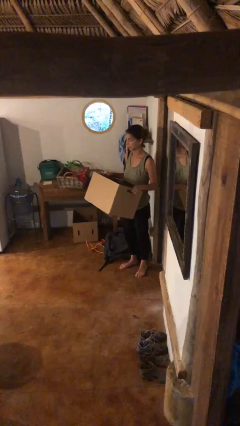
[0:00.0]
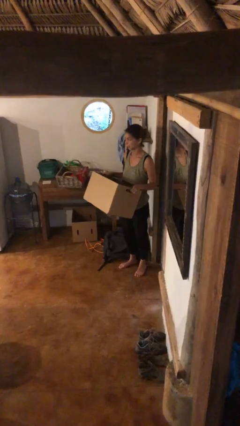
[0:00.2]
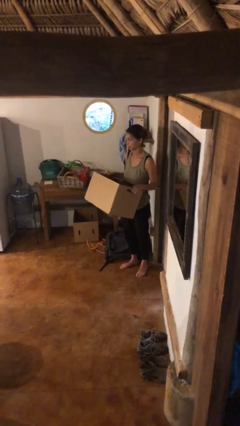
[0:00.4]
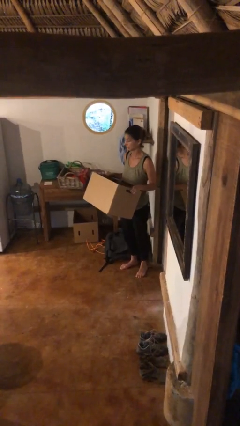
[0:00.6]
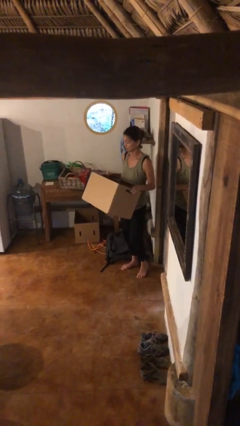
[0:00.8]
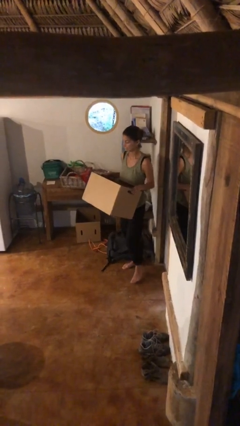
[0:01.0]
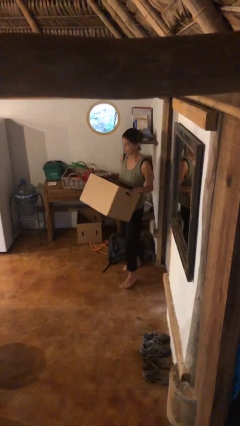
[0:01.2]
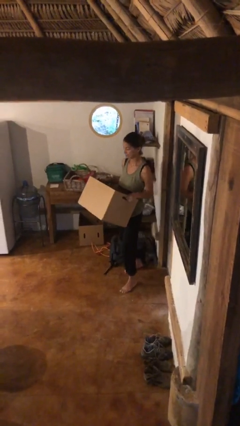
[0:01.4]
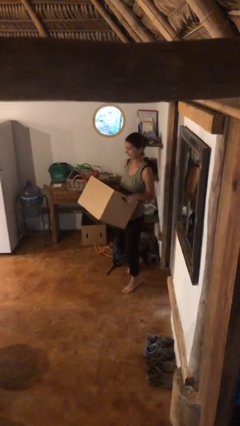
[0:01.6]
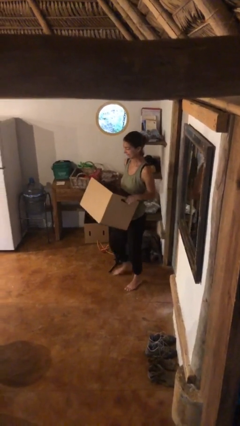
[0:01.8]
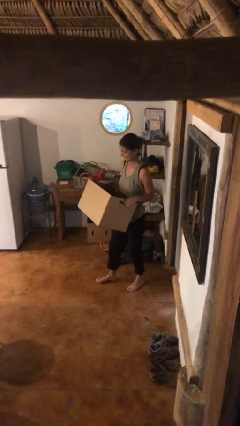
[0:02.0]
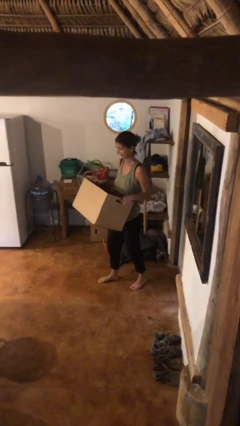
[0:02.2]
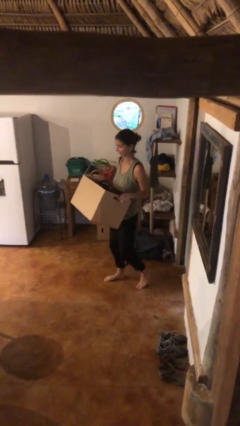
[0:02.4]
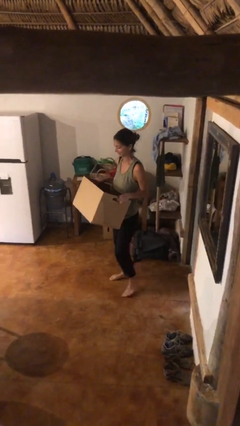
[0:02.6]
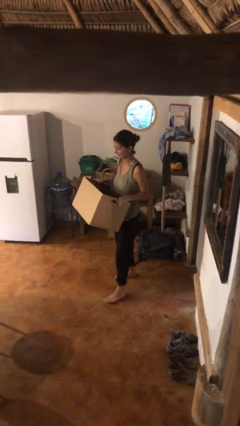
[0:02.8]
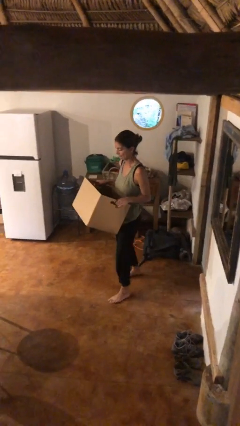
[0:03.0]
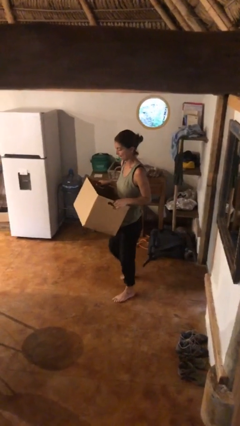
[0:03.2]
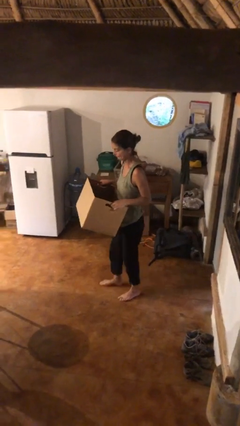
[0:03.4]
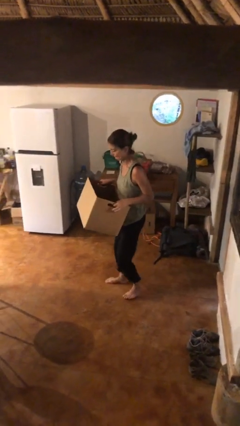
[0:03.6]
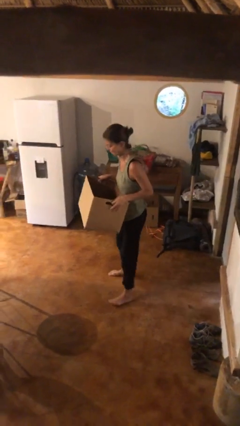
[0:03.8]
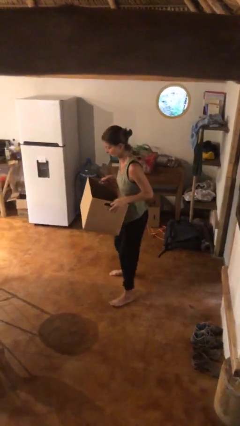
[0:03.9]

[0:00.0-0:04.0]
person carries heavy object

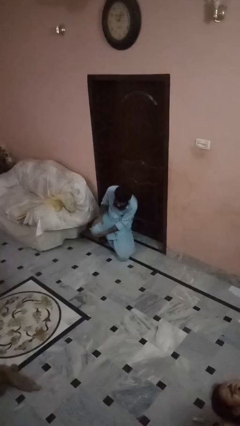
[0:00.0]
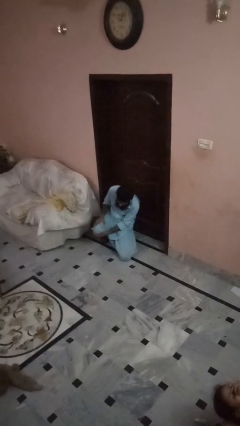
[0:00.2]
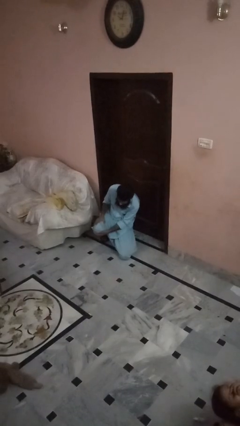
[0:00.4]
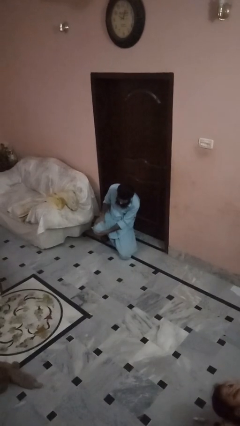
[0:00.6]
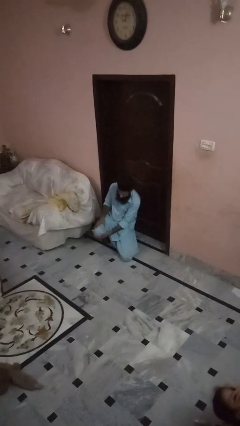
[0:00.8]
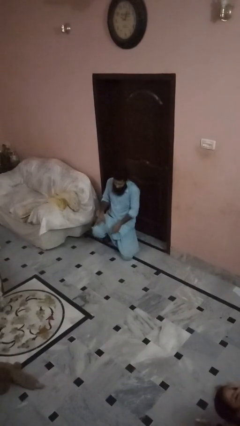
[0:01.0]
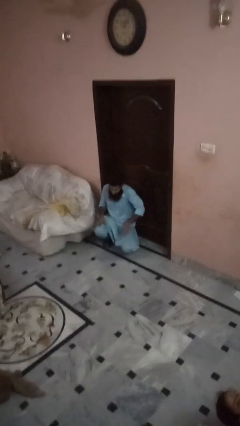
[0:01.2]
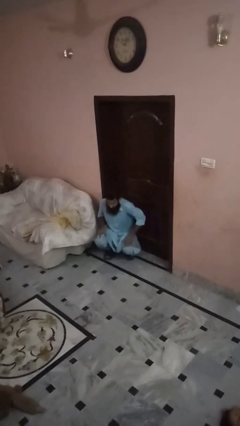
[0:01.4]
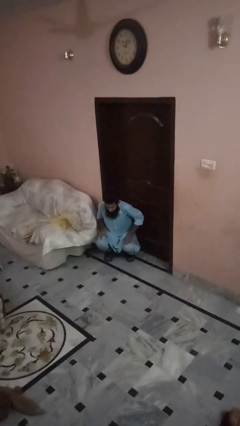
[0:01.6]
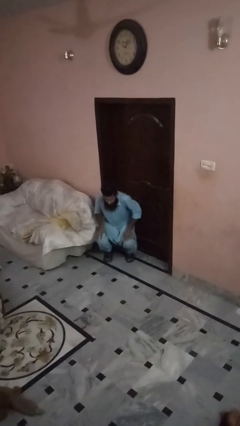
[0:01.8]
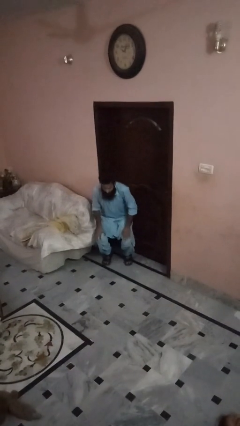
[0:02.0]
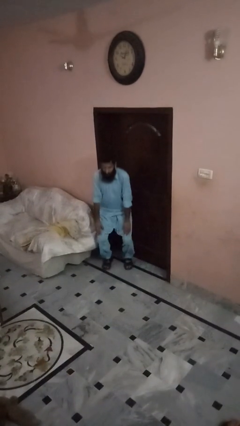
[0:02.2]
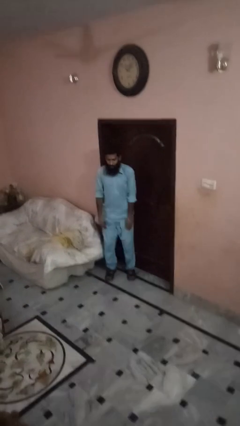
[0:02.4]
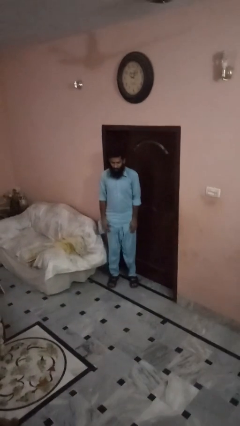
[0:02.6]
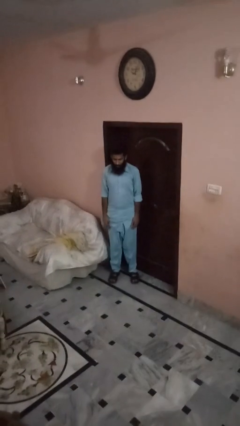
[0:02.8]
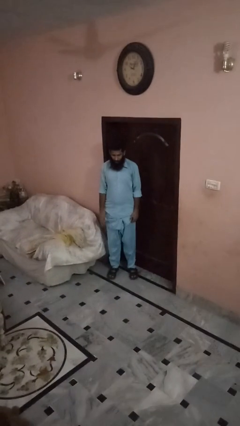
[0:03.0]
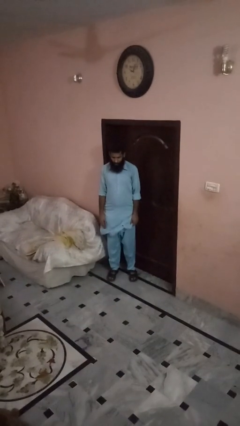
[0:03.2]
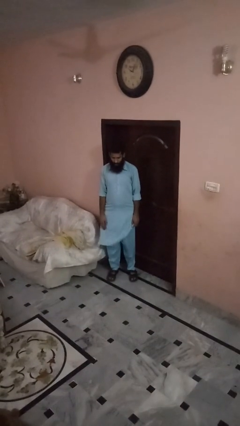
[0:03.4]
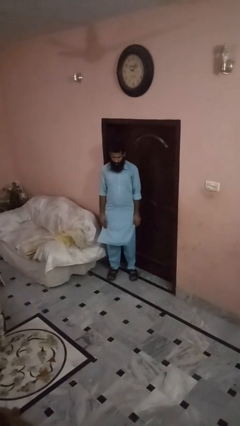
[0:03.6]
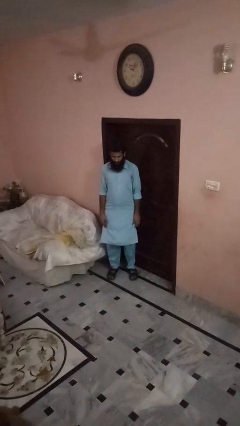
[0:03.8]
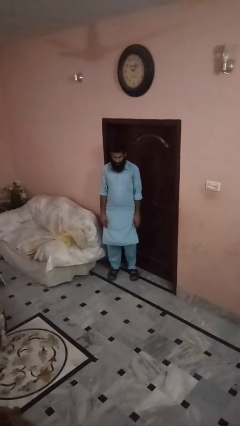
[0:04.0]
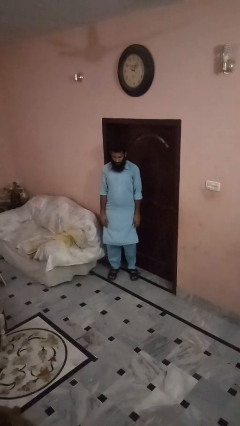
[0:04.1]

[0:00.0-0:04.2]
person stands up from floor

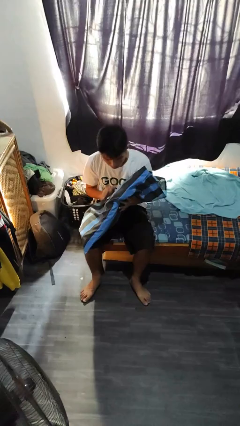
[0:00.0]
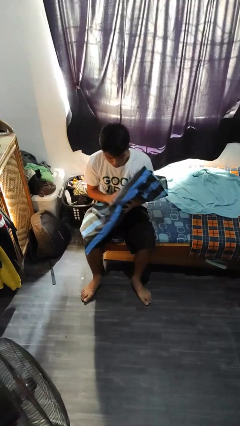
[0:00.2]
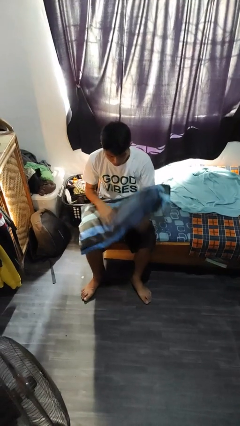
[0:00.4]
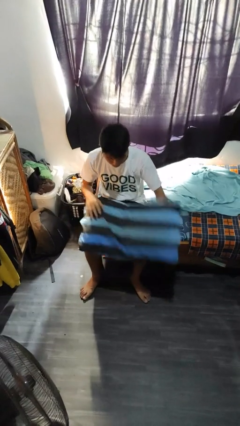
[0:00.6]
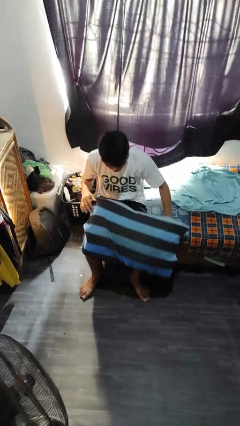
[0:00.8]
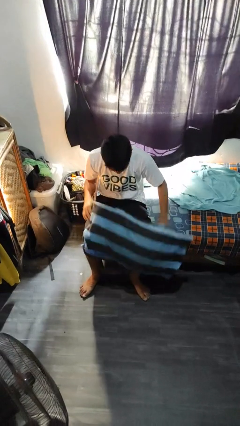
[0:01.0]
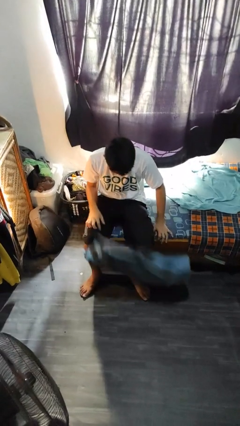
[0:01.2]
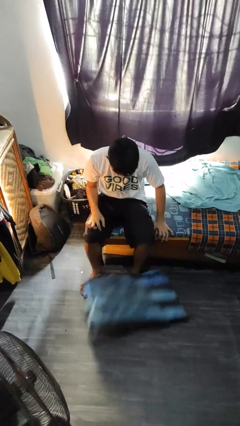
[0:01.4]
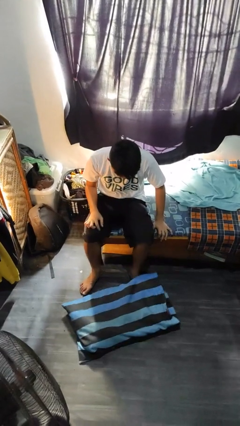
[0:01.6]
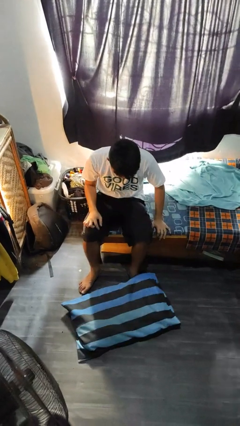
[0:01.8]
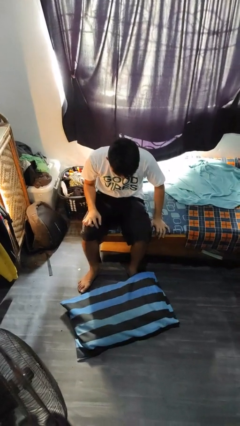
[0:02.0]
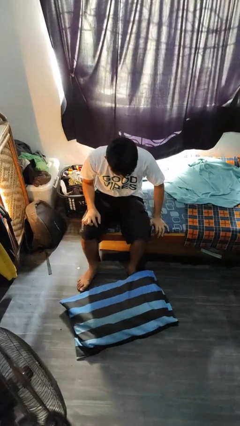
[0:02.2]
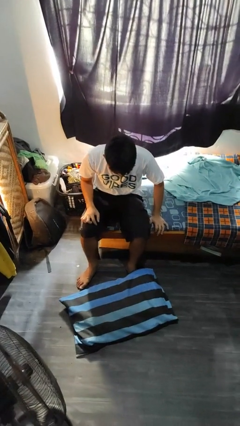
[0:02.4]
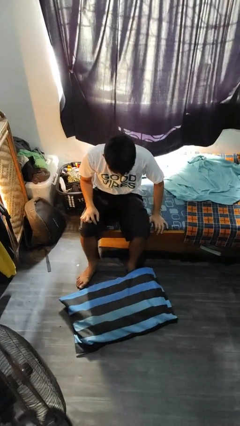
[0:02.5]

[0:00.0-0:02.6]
person drops object

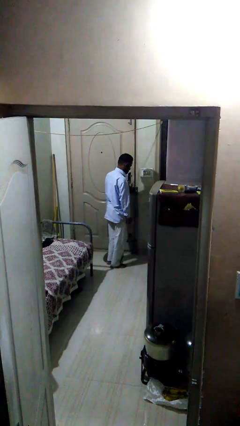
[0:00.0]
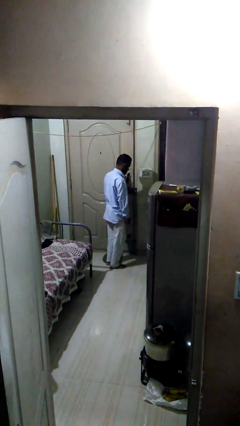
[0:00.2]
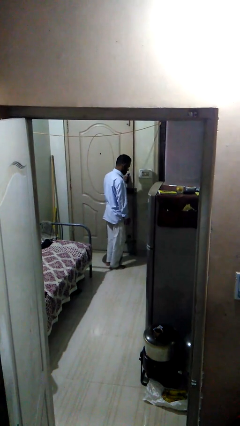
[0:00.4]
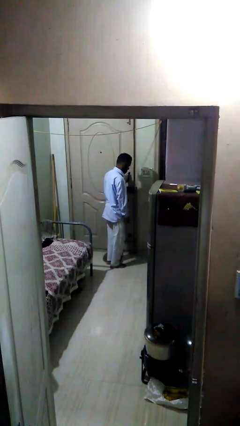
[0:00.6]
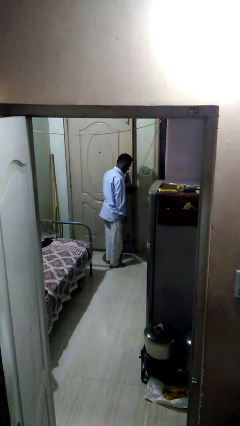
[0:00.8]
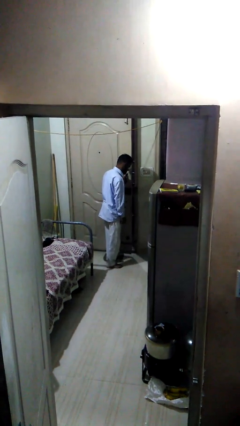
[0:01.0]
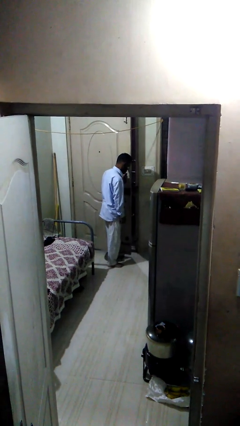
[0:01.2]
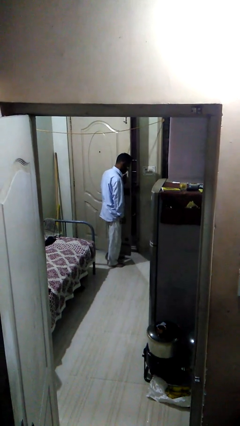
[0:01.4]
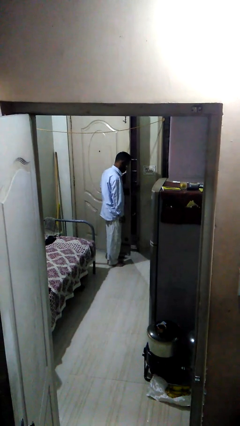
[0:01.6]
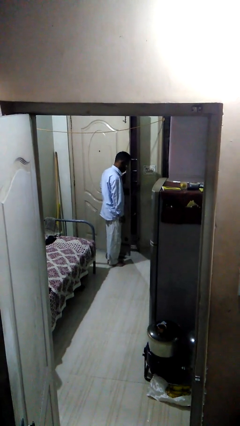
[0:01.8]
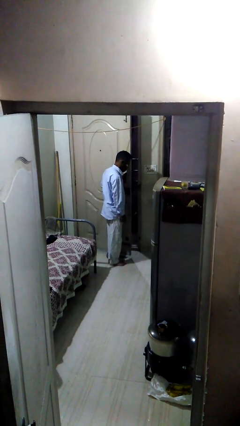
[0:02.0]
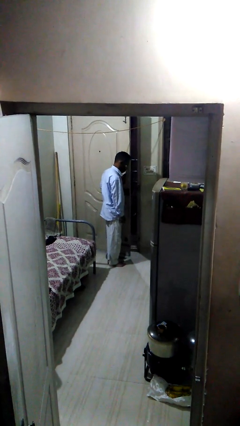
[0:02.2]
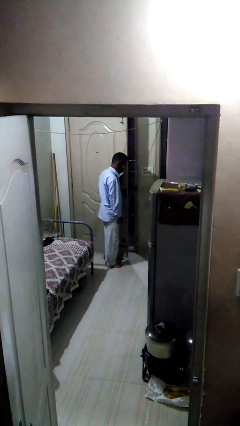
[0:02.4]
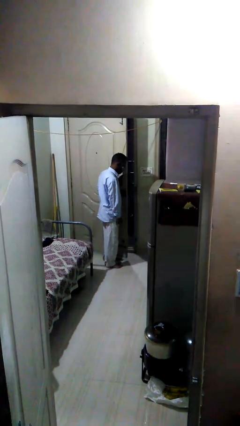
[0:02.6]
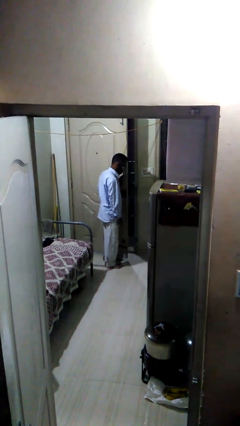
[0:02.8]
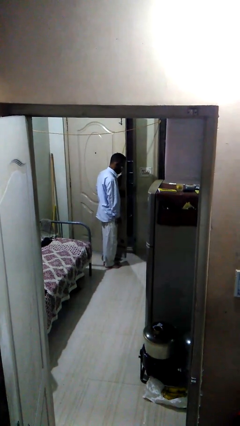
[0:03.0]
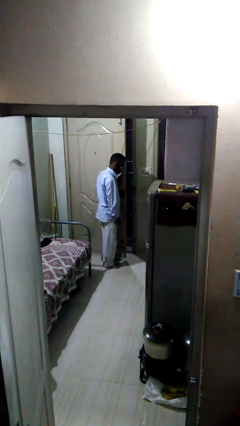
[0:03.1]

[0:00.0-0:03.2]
person opens facility door

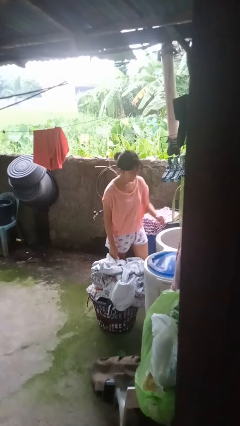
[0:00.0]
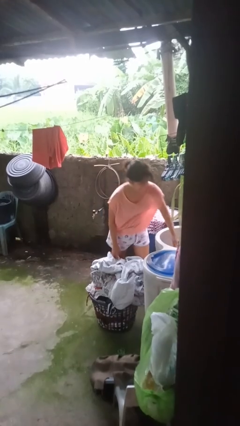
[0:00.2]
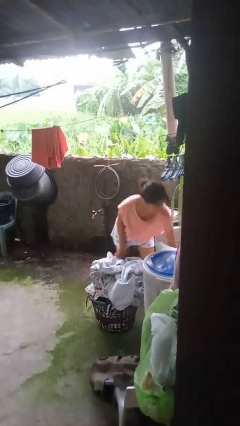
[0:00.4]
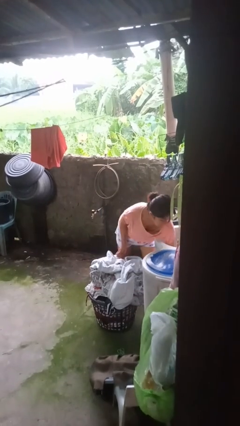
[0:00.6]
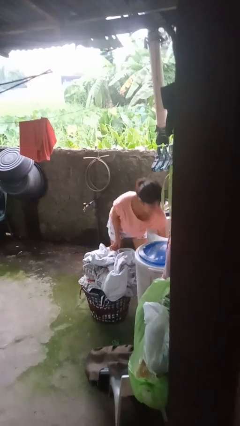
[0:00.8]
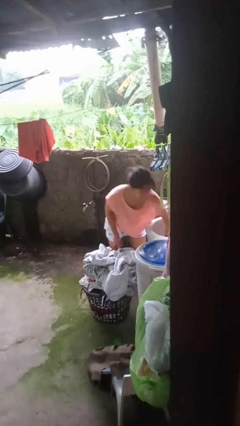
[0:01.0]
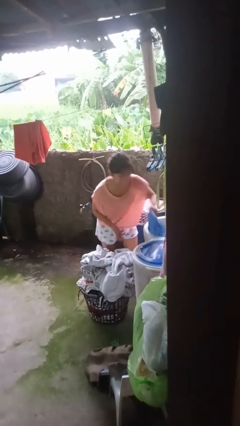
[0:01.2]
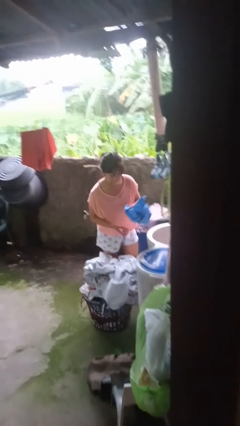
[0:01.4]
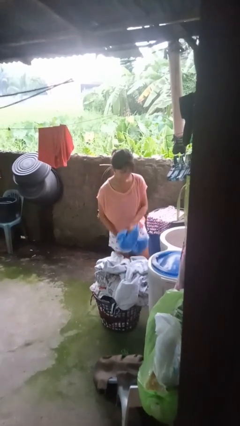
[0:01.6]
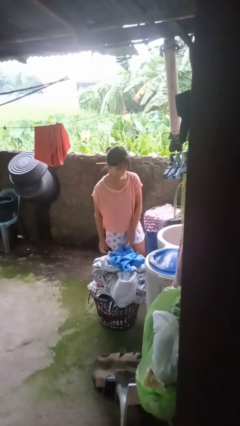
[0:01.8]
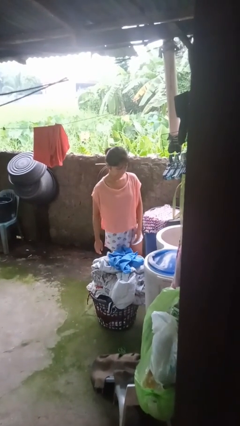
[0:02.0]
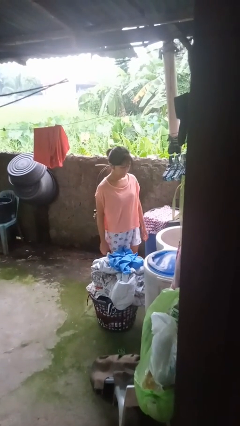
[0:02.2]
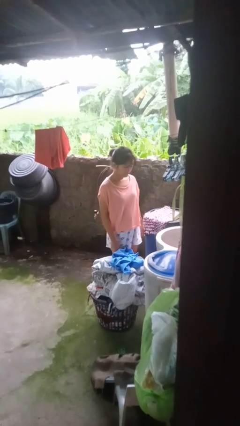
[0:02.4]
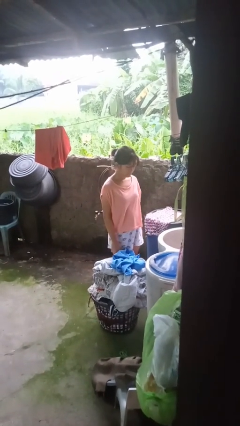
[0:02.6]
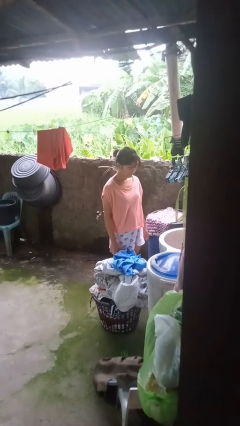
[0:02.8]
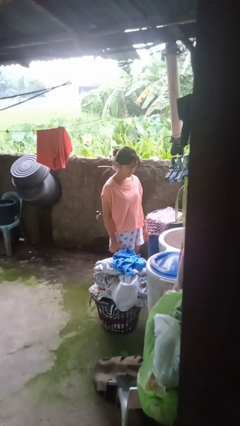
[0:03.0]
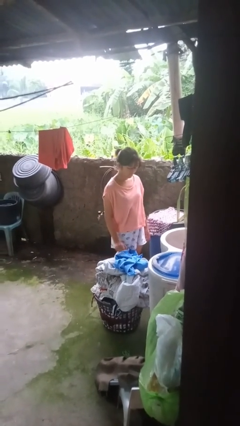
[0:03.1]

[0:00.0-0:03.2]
person unloads clotheswasher

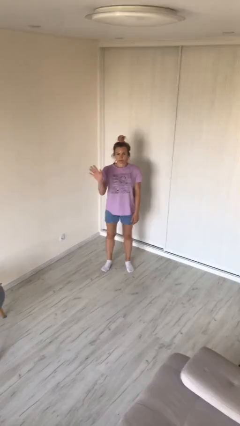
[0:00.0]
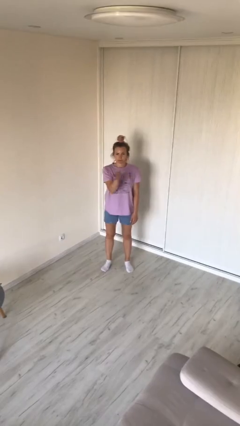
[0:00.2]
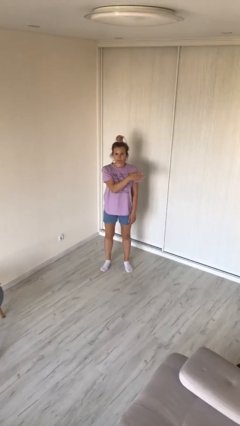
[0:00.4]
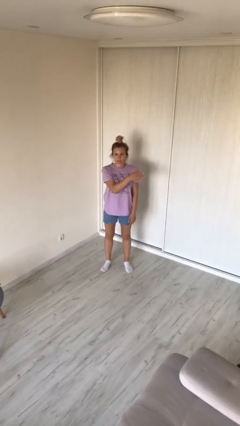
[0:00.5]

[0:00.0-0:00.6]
person gestures swipe left
